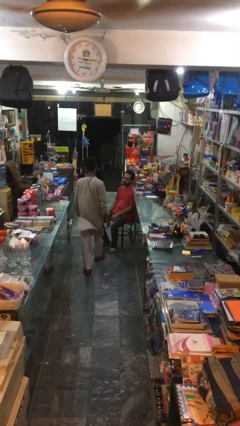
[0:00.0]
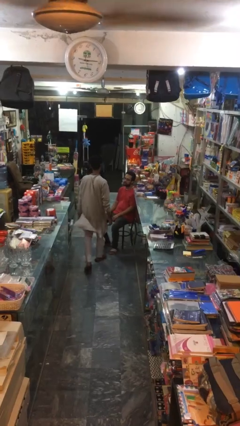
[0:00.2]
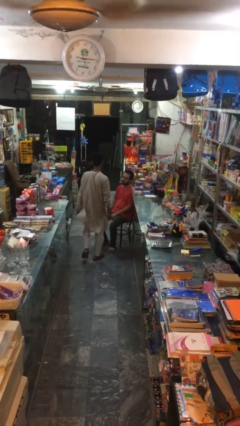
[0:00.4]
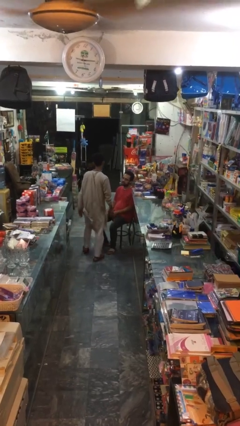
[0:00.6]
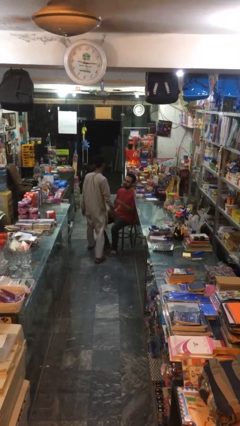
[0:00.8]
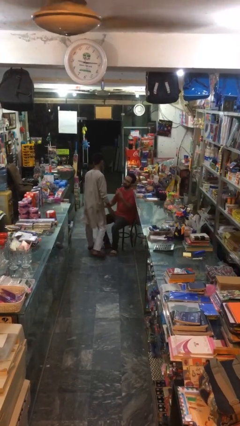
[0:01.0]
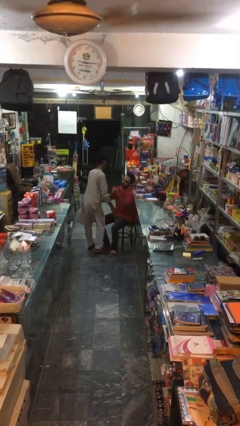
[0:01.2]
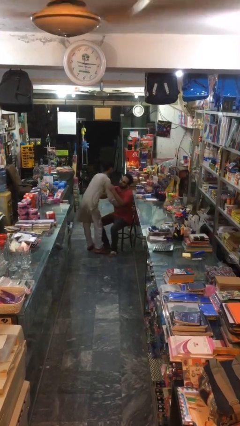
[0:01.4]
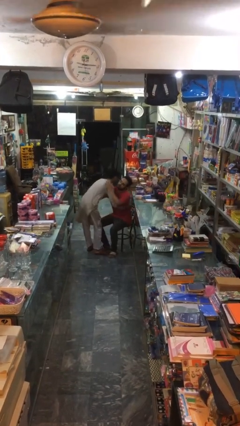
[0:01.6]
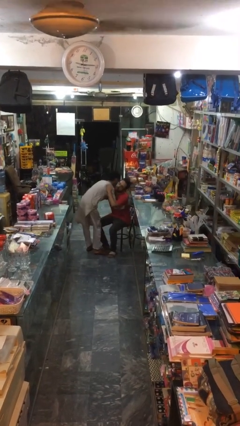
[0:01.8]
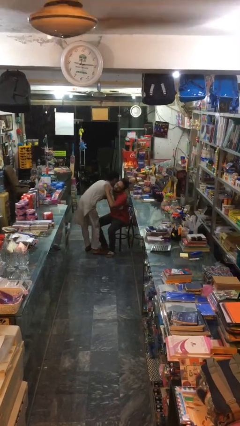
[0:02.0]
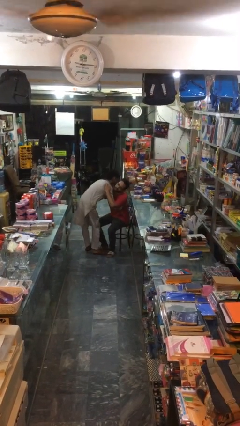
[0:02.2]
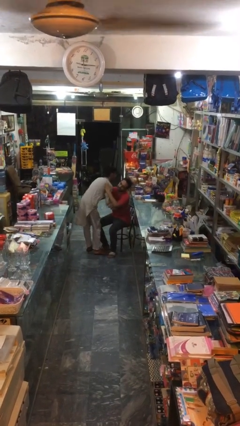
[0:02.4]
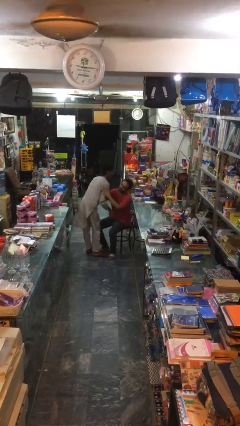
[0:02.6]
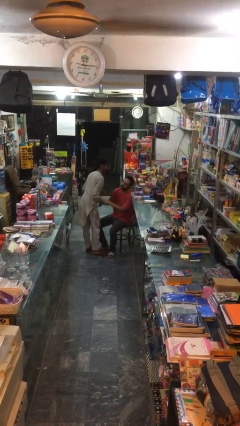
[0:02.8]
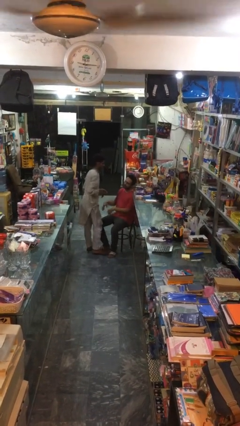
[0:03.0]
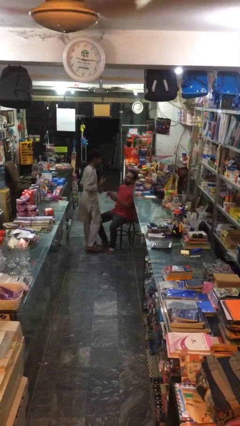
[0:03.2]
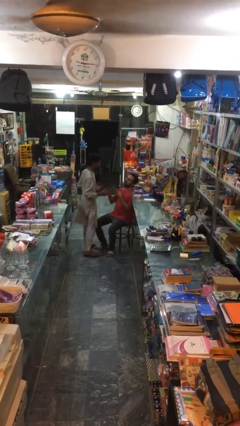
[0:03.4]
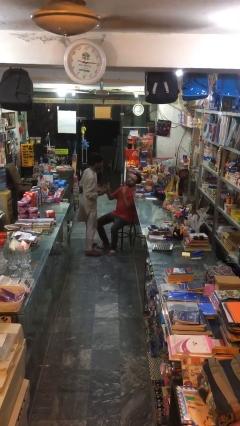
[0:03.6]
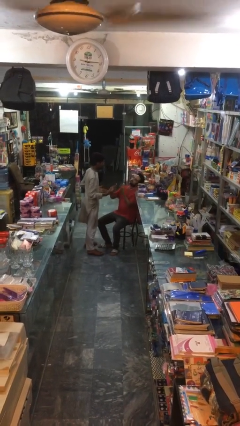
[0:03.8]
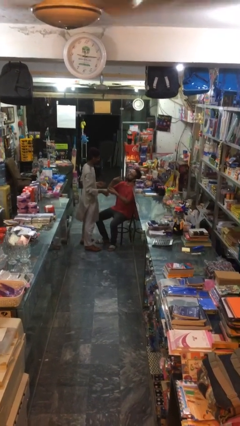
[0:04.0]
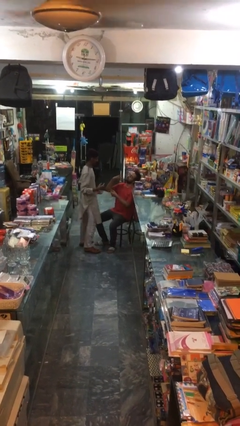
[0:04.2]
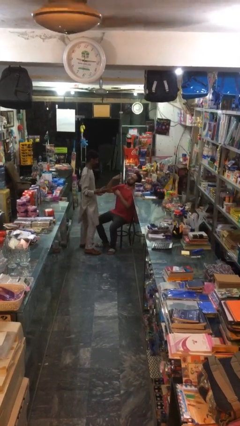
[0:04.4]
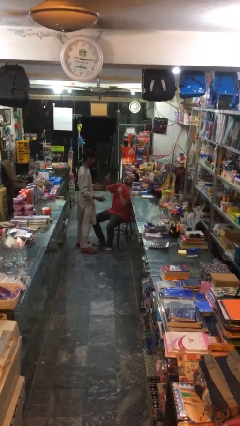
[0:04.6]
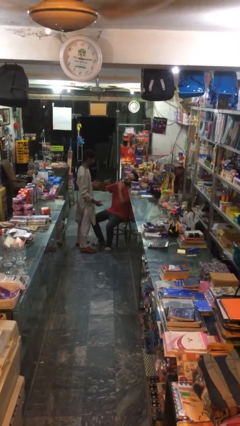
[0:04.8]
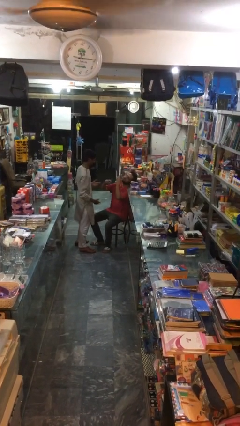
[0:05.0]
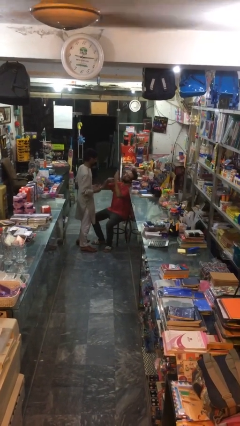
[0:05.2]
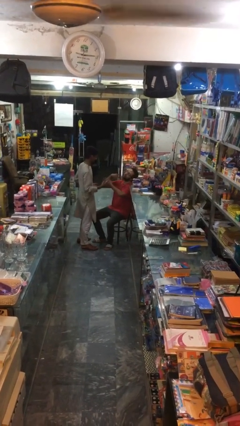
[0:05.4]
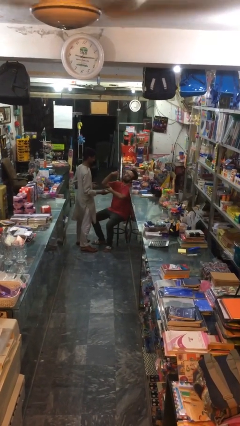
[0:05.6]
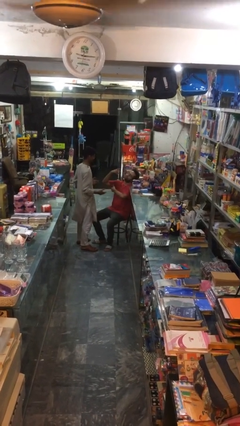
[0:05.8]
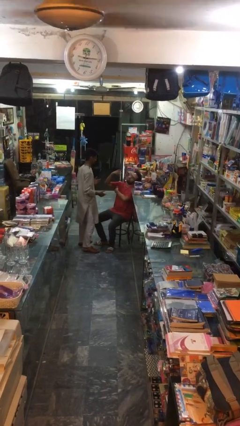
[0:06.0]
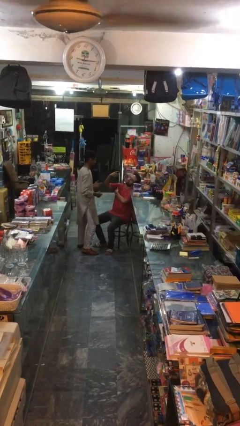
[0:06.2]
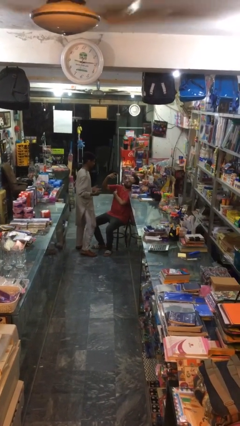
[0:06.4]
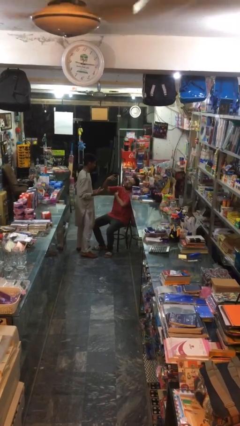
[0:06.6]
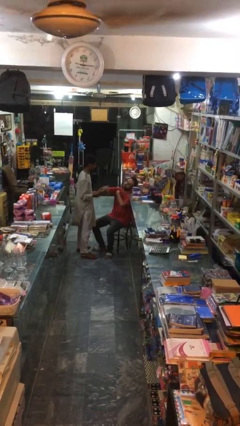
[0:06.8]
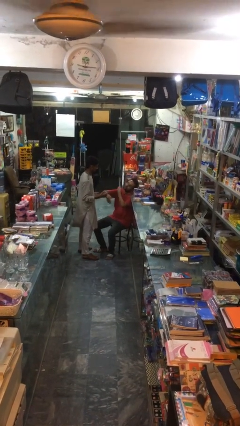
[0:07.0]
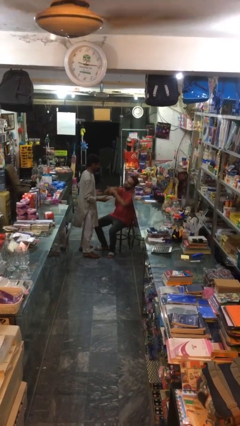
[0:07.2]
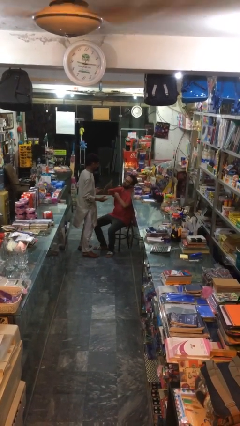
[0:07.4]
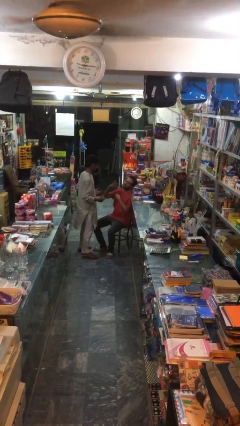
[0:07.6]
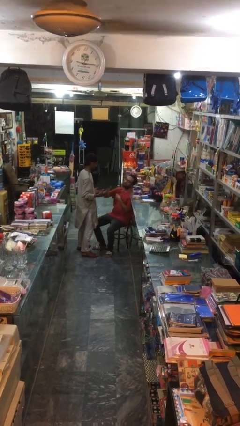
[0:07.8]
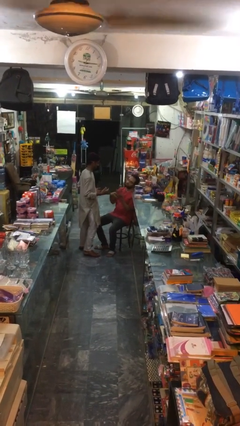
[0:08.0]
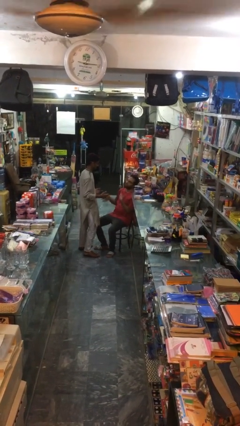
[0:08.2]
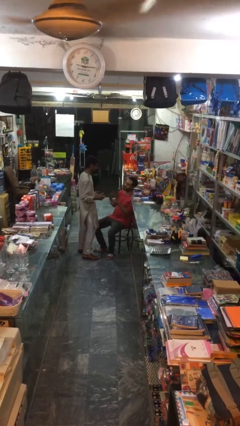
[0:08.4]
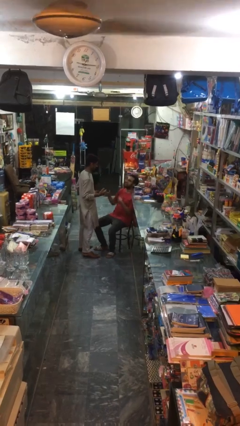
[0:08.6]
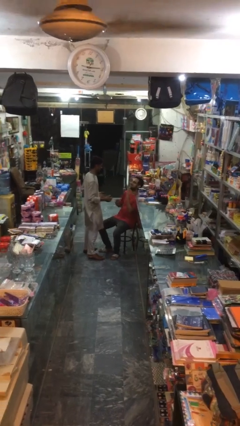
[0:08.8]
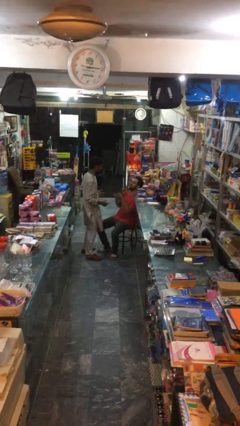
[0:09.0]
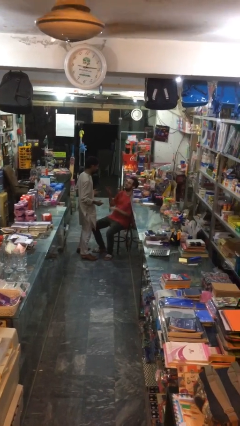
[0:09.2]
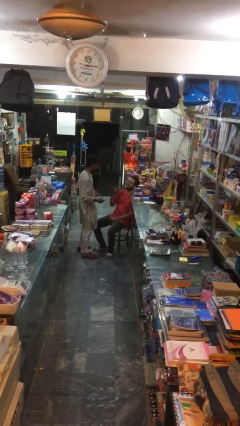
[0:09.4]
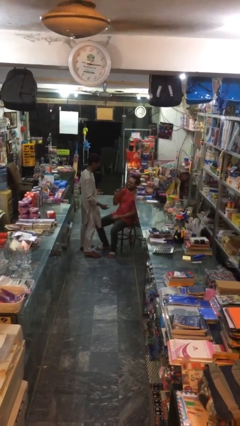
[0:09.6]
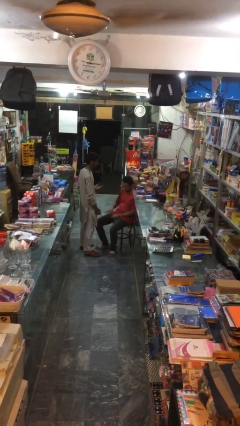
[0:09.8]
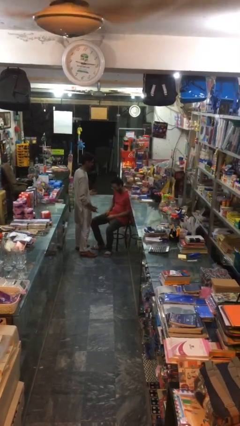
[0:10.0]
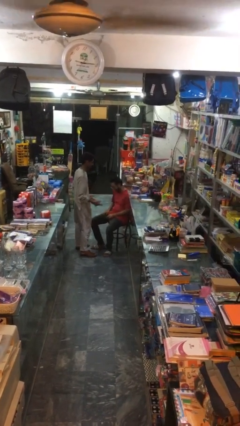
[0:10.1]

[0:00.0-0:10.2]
person embraces person

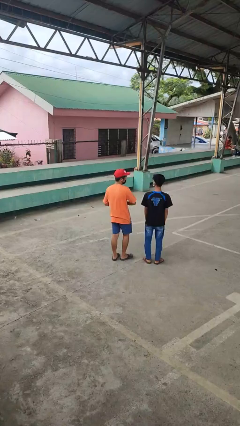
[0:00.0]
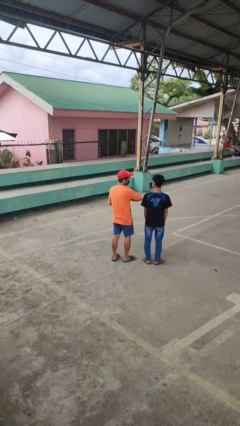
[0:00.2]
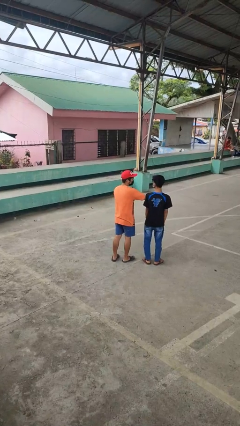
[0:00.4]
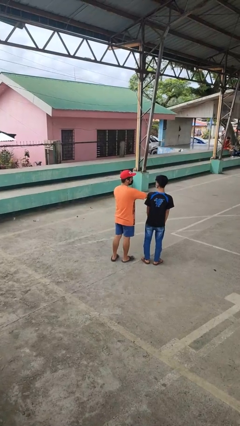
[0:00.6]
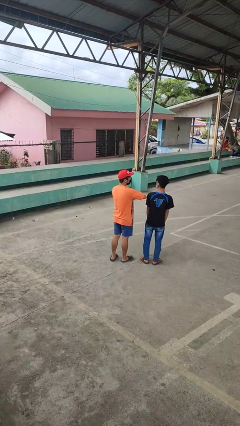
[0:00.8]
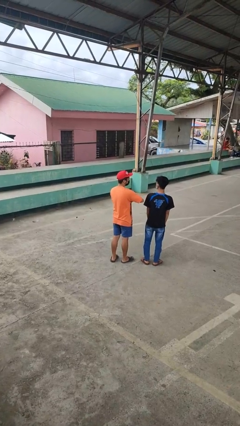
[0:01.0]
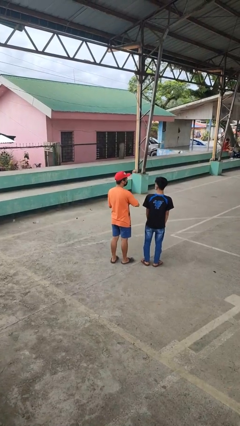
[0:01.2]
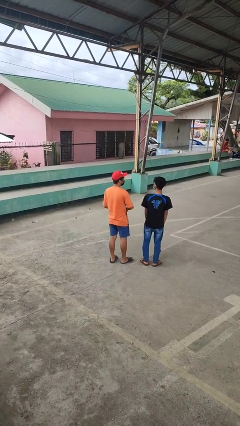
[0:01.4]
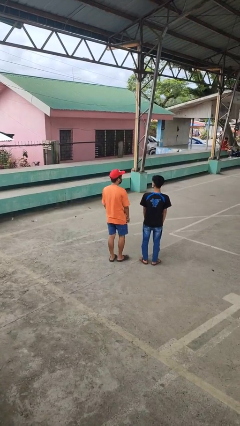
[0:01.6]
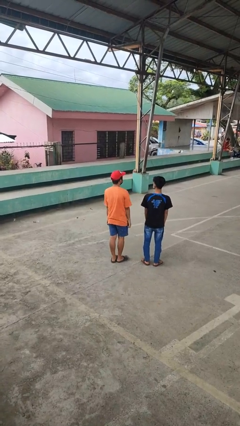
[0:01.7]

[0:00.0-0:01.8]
person nudges person with elbow

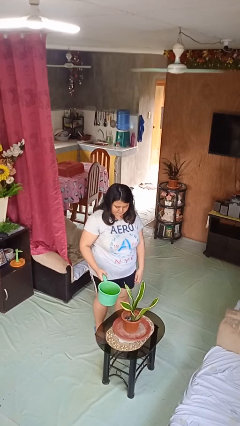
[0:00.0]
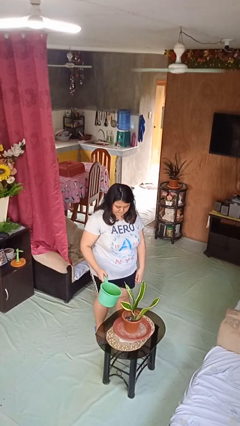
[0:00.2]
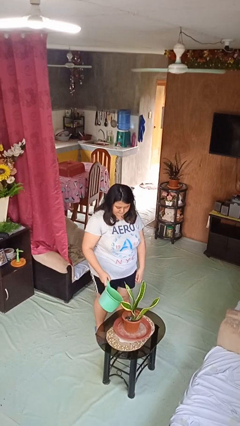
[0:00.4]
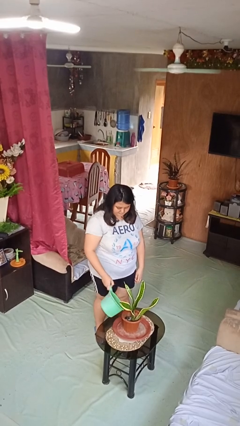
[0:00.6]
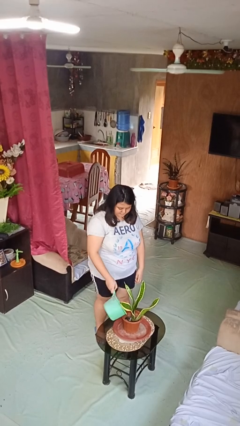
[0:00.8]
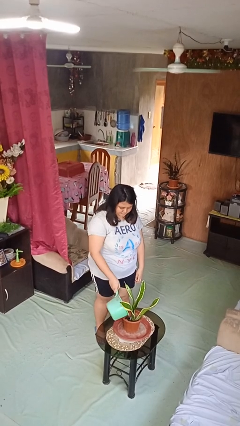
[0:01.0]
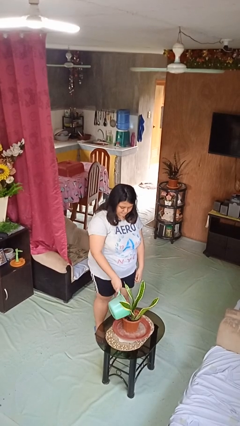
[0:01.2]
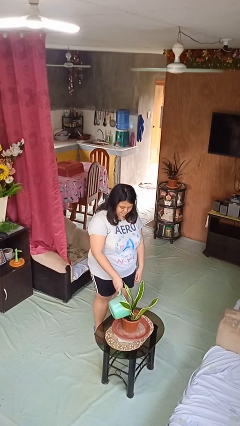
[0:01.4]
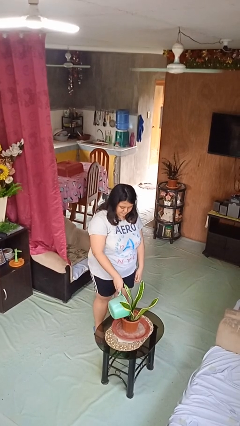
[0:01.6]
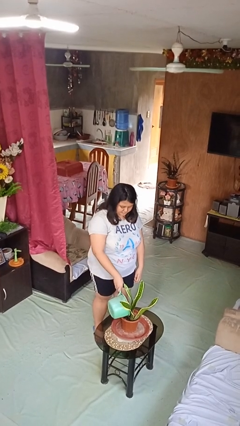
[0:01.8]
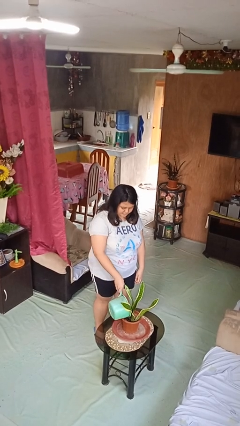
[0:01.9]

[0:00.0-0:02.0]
person waters houseplant

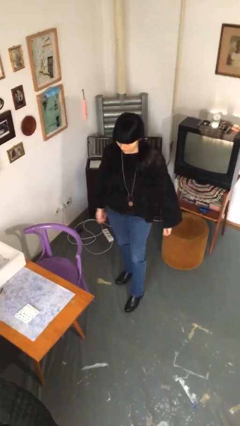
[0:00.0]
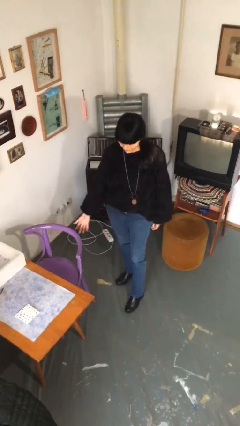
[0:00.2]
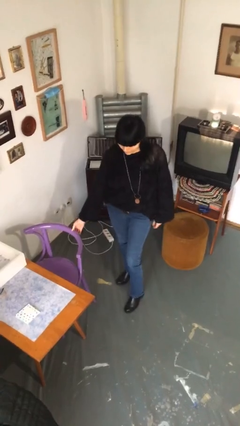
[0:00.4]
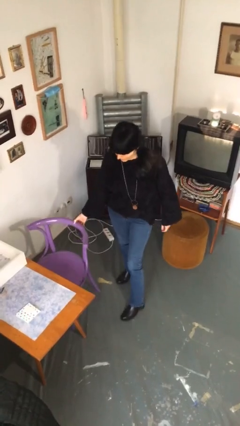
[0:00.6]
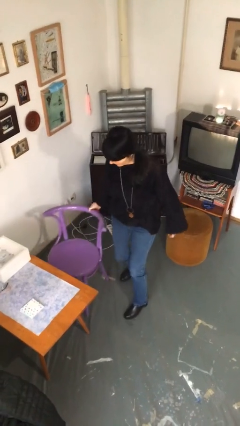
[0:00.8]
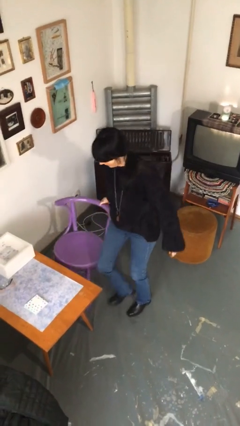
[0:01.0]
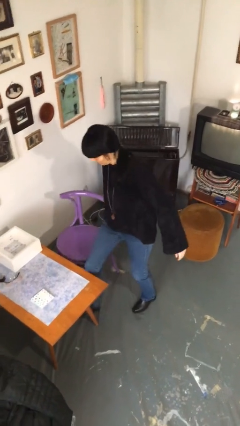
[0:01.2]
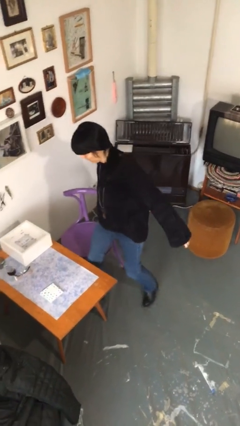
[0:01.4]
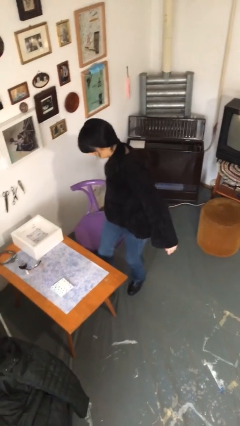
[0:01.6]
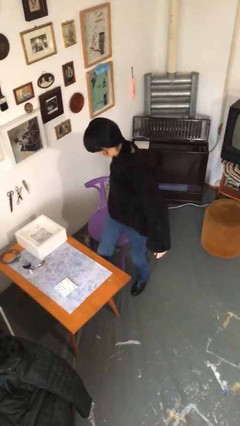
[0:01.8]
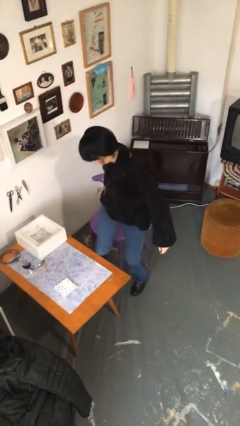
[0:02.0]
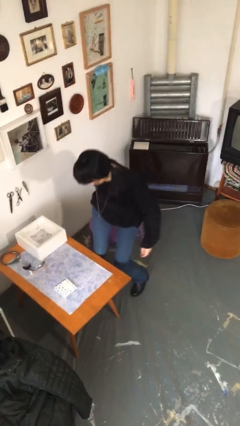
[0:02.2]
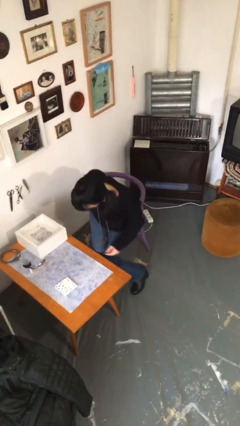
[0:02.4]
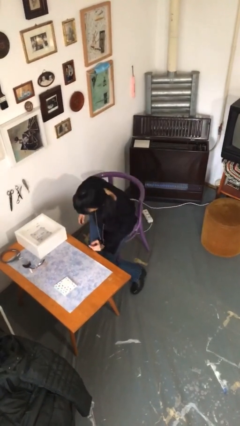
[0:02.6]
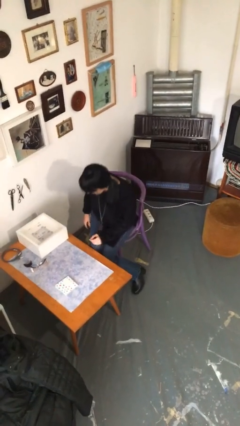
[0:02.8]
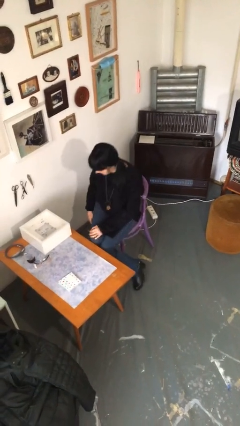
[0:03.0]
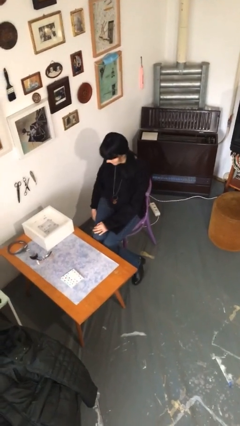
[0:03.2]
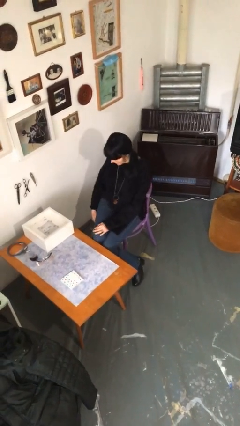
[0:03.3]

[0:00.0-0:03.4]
person sits down
